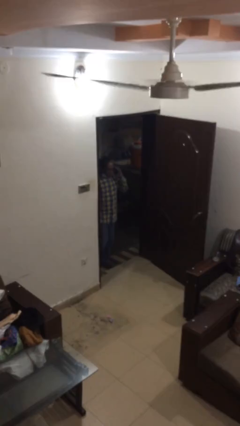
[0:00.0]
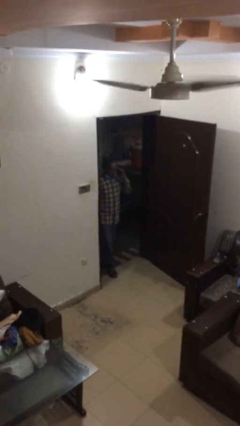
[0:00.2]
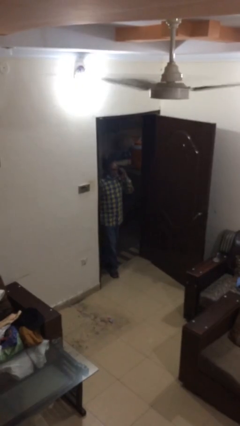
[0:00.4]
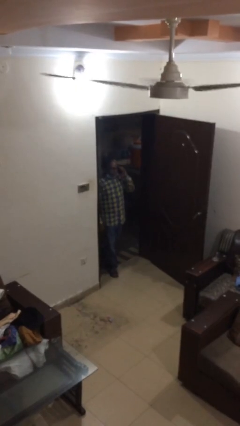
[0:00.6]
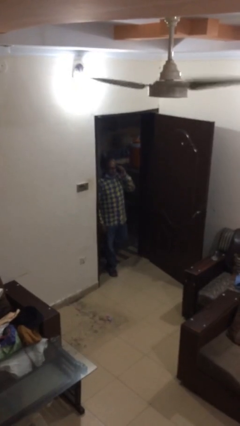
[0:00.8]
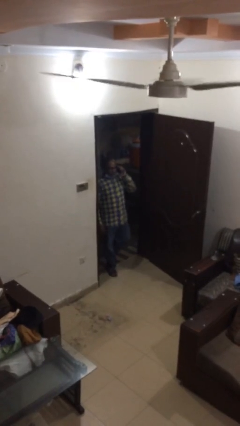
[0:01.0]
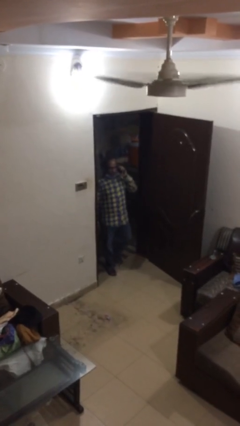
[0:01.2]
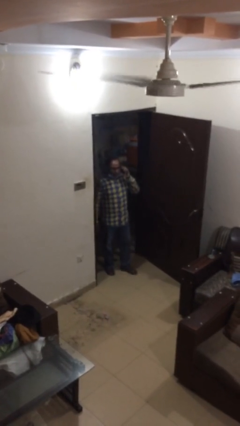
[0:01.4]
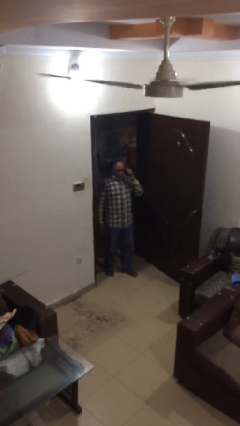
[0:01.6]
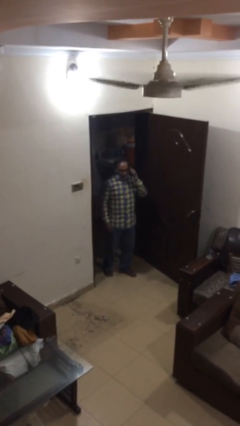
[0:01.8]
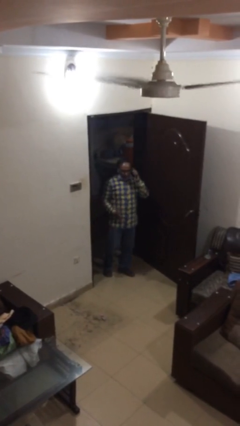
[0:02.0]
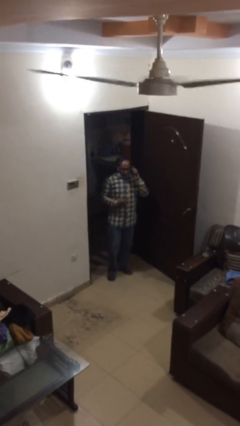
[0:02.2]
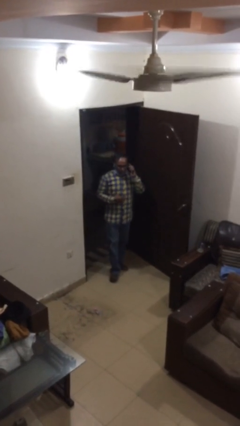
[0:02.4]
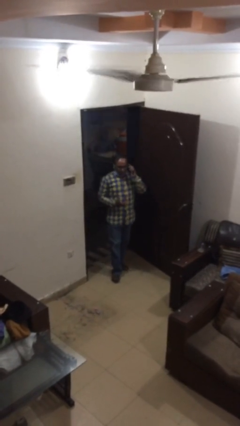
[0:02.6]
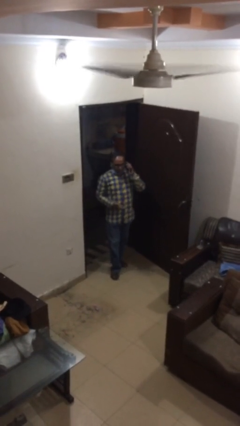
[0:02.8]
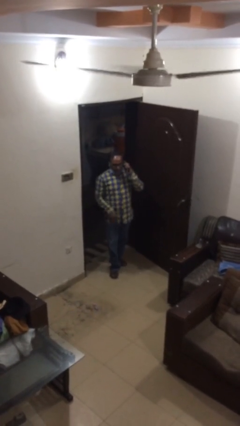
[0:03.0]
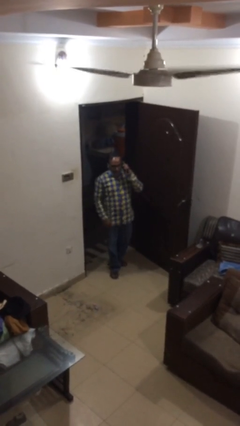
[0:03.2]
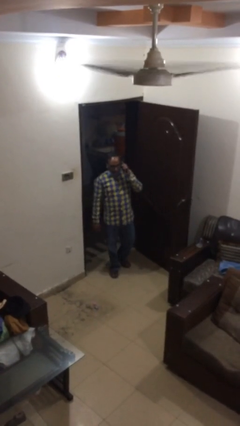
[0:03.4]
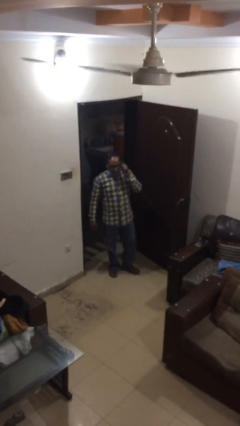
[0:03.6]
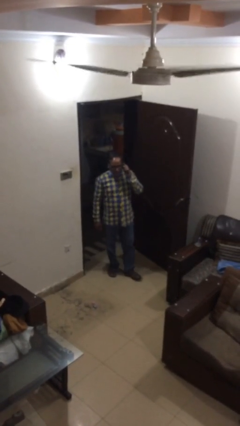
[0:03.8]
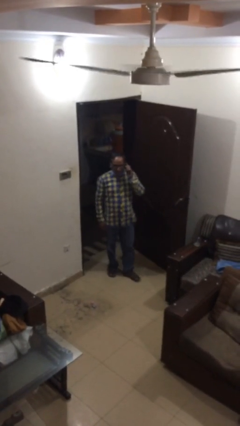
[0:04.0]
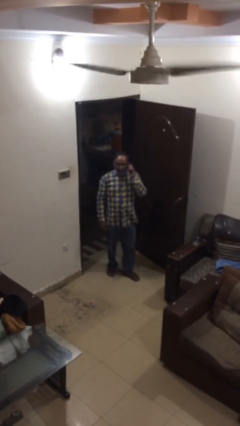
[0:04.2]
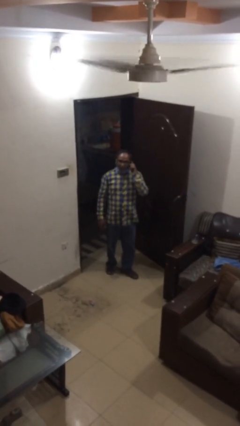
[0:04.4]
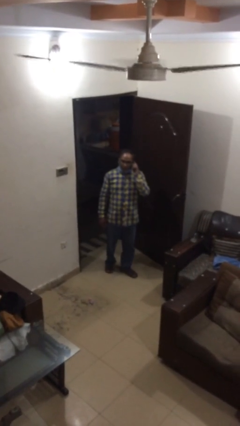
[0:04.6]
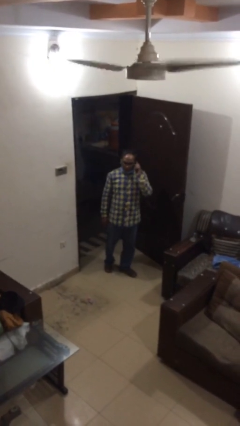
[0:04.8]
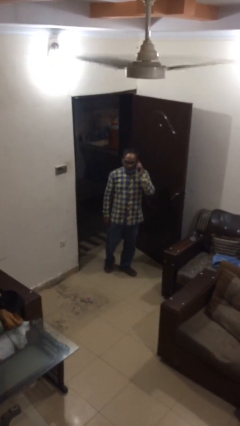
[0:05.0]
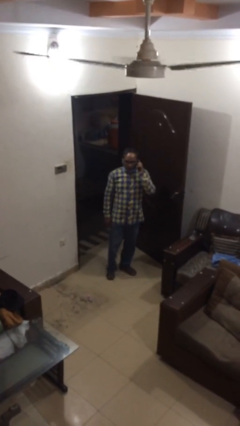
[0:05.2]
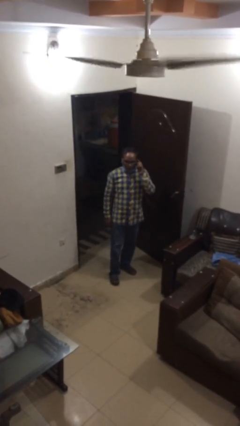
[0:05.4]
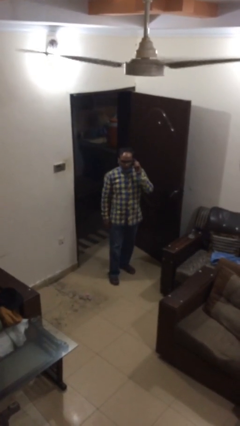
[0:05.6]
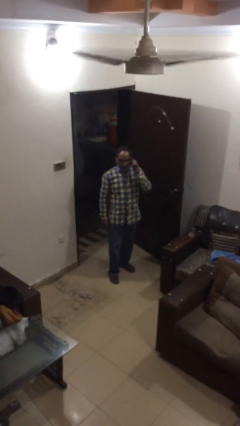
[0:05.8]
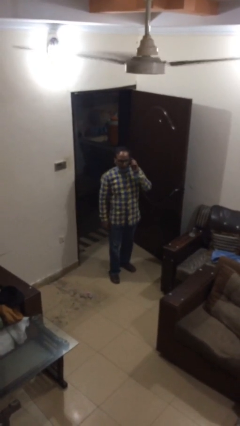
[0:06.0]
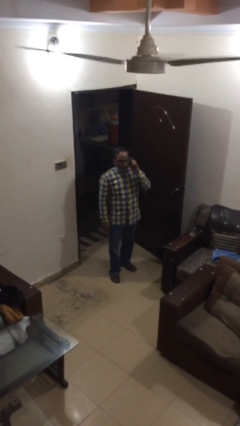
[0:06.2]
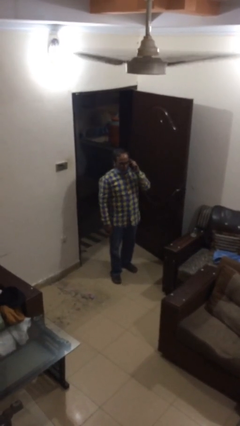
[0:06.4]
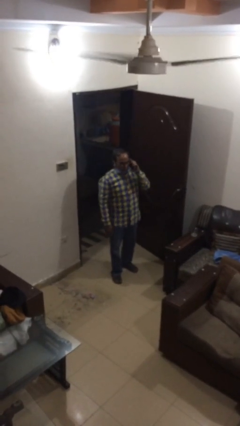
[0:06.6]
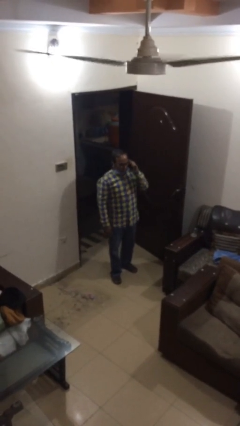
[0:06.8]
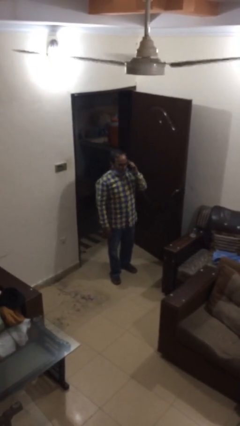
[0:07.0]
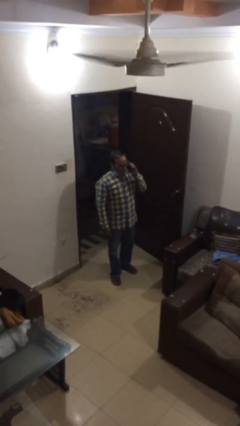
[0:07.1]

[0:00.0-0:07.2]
person enters scene through structure

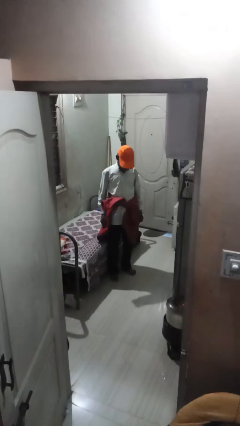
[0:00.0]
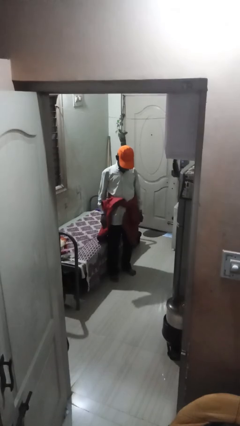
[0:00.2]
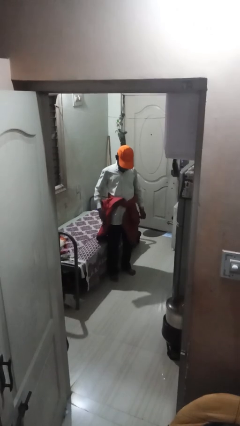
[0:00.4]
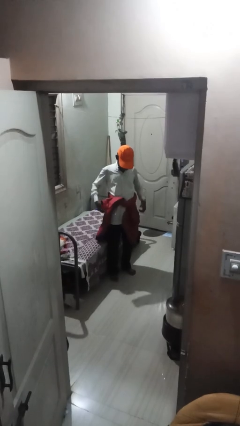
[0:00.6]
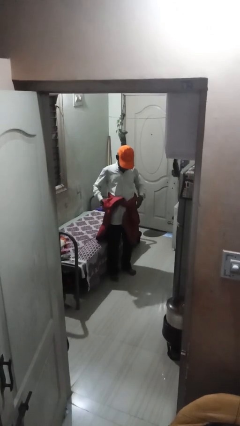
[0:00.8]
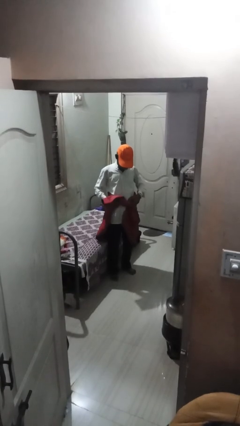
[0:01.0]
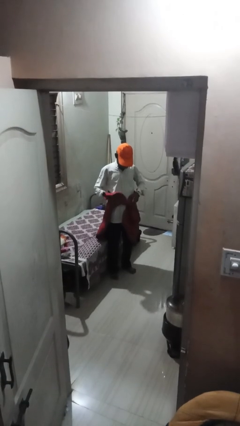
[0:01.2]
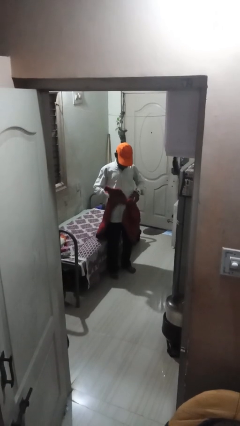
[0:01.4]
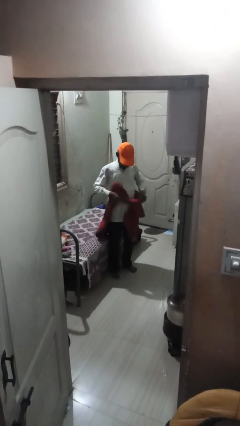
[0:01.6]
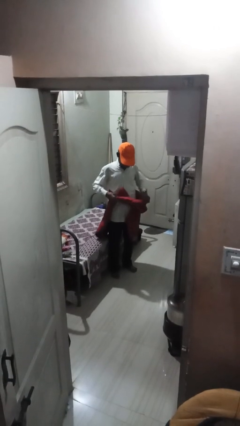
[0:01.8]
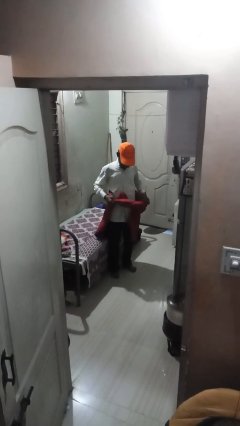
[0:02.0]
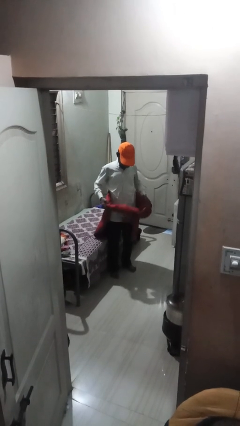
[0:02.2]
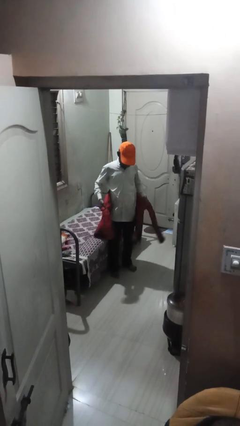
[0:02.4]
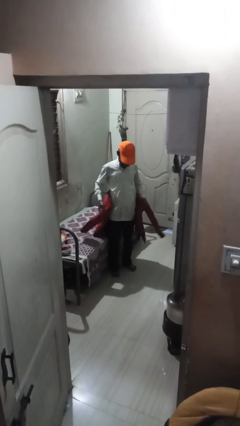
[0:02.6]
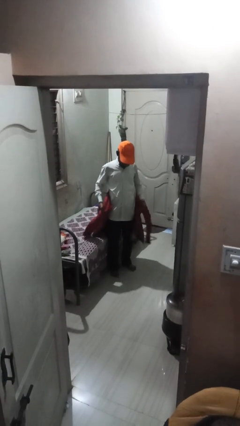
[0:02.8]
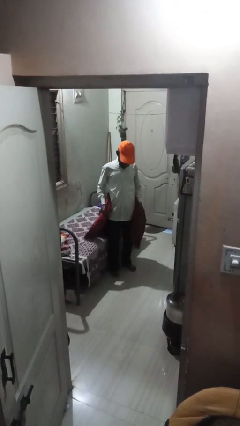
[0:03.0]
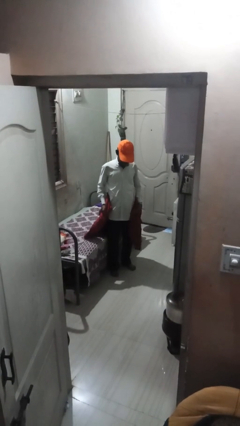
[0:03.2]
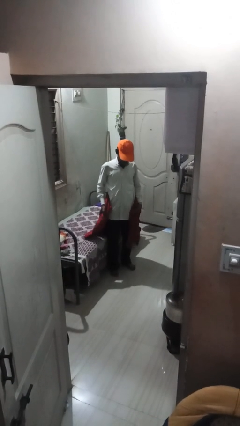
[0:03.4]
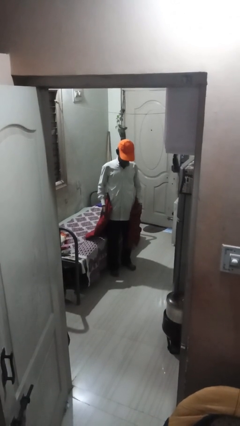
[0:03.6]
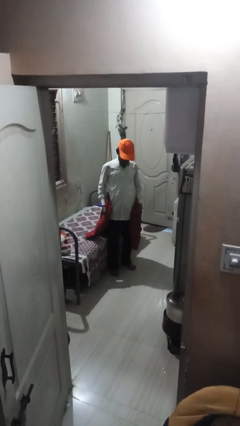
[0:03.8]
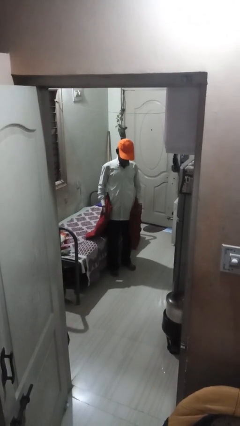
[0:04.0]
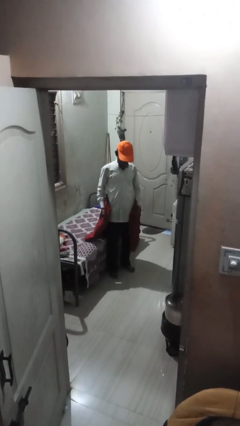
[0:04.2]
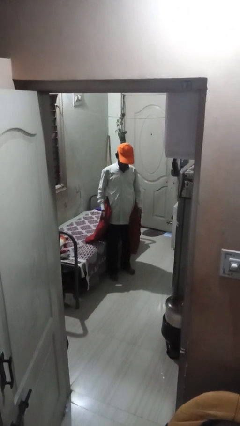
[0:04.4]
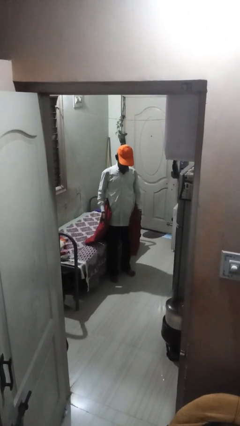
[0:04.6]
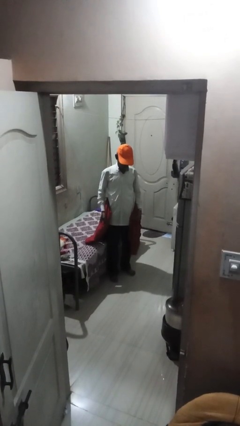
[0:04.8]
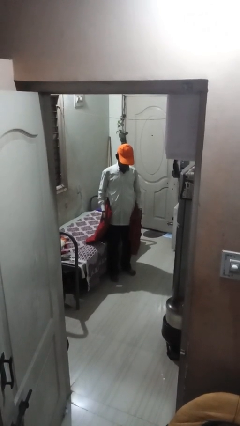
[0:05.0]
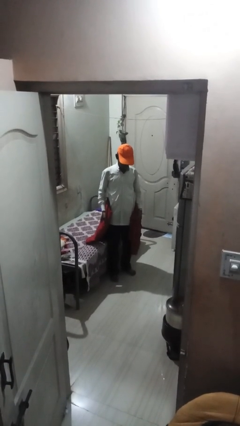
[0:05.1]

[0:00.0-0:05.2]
person unties jacket around waist

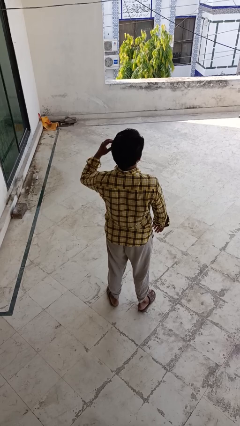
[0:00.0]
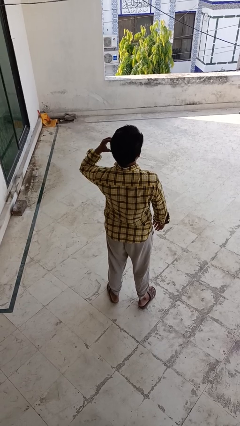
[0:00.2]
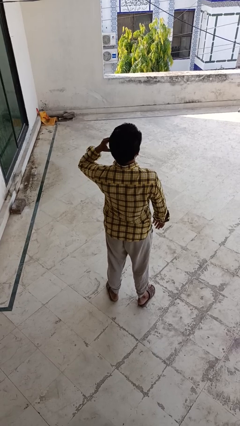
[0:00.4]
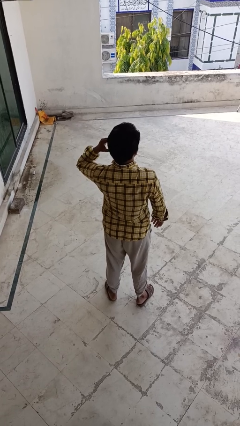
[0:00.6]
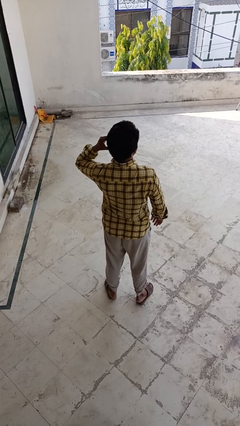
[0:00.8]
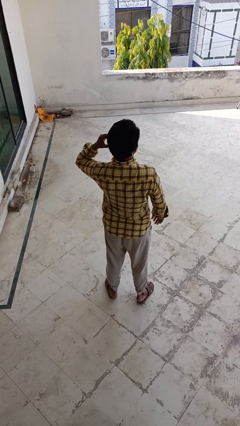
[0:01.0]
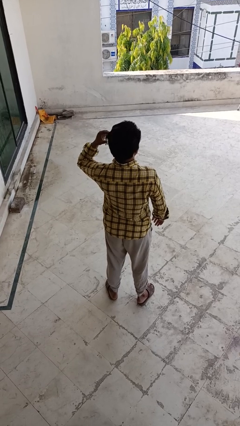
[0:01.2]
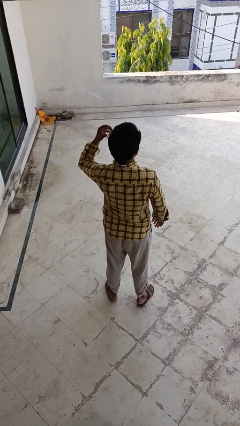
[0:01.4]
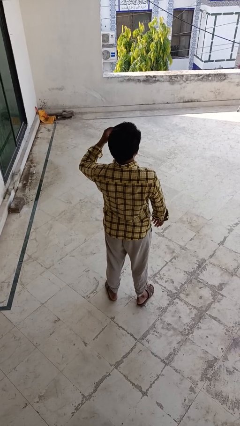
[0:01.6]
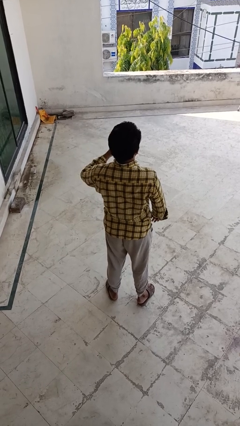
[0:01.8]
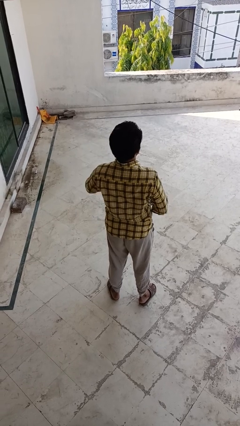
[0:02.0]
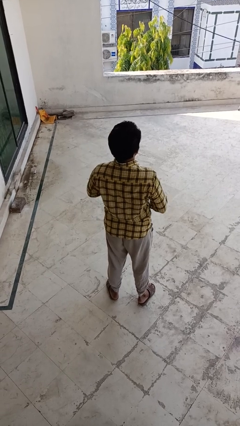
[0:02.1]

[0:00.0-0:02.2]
person takes off earrings

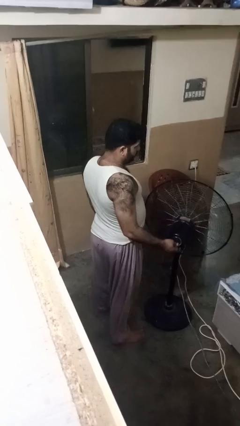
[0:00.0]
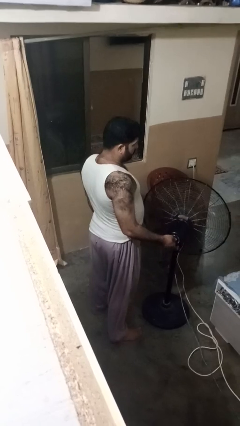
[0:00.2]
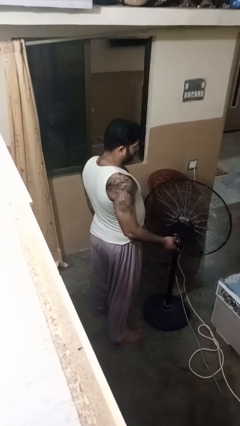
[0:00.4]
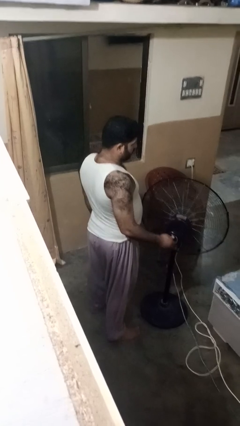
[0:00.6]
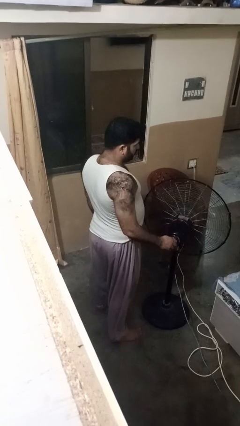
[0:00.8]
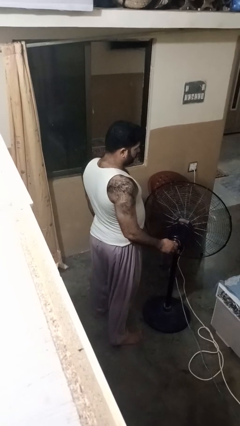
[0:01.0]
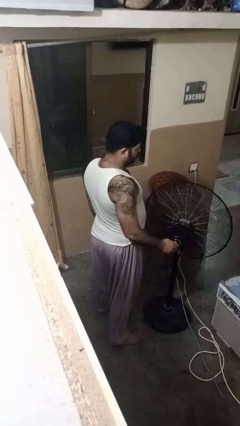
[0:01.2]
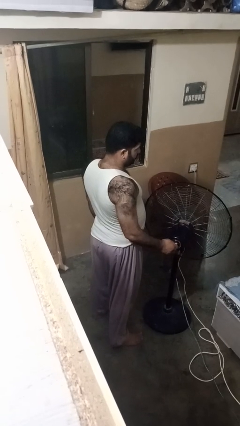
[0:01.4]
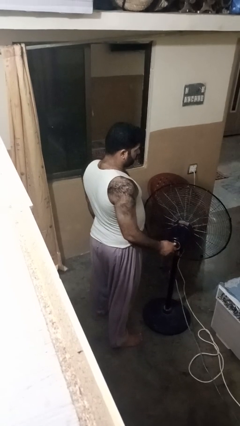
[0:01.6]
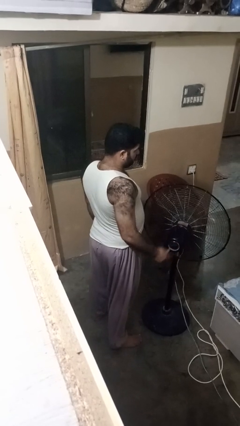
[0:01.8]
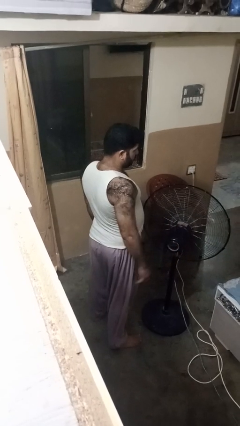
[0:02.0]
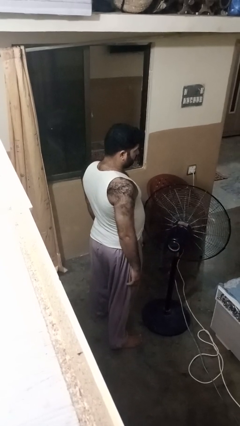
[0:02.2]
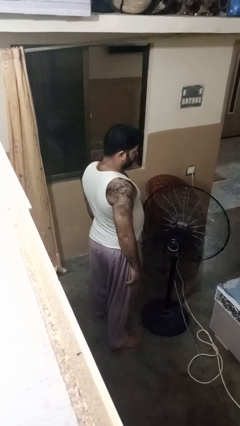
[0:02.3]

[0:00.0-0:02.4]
person turns off fan

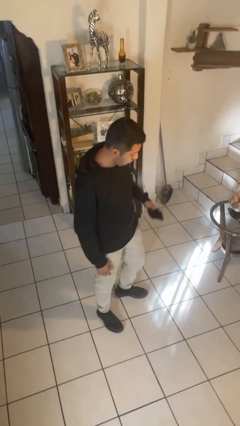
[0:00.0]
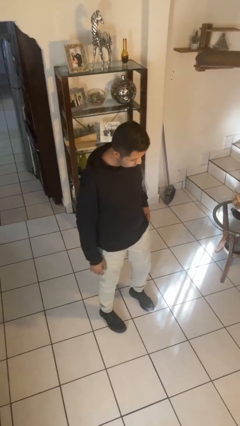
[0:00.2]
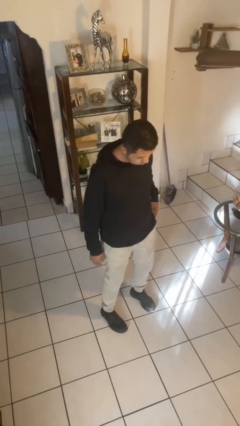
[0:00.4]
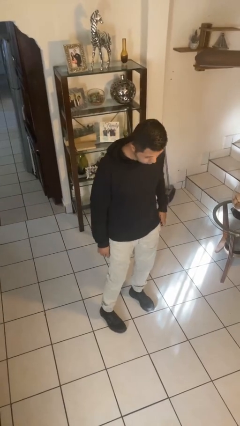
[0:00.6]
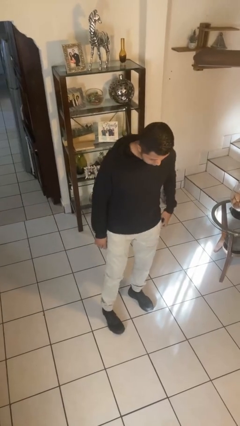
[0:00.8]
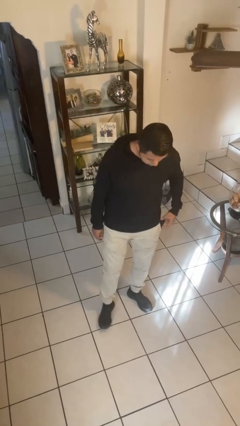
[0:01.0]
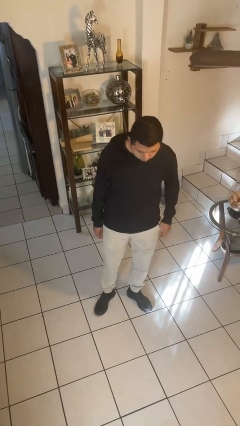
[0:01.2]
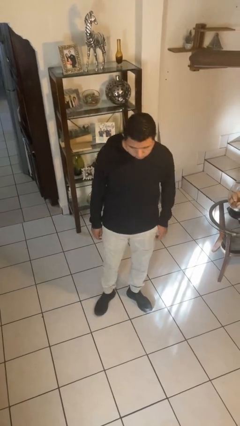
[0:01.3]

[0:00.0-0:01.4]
person puts phone into pocket
